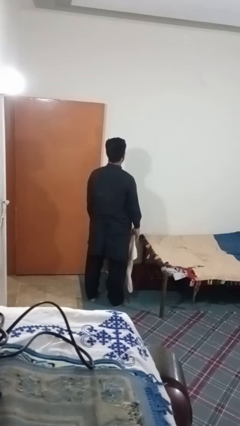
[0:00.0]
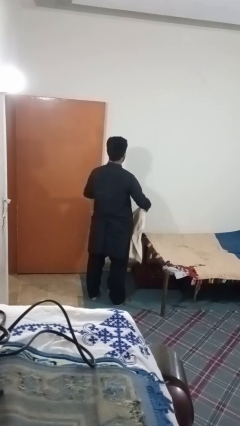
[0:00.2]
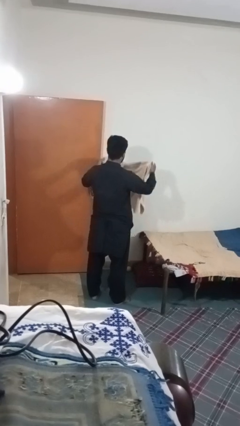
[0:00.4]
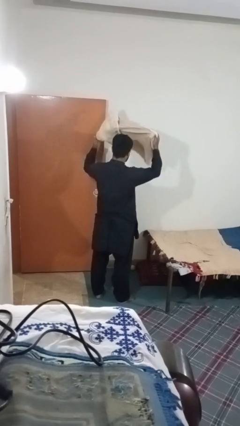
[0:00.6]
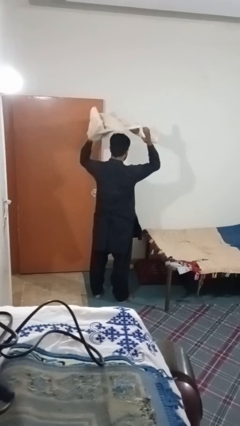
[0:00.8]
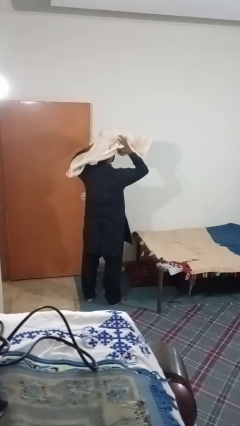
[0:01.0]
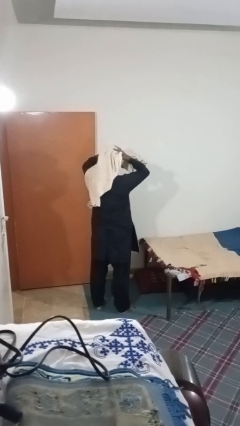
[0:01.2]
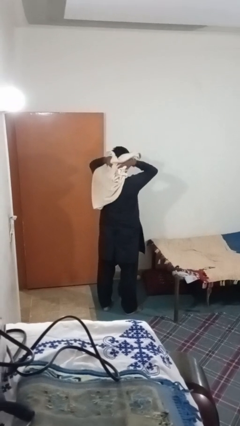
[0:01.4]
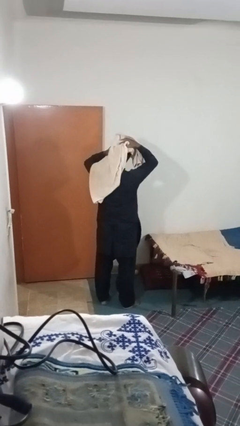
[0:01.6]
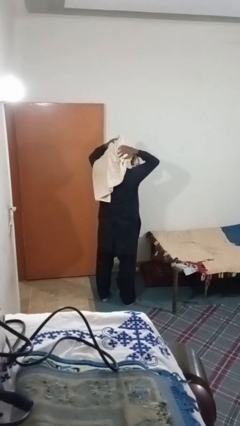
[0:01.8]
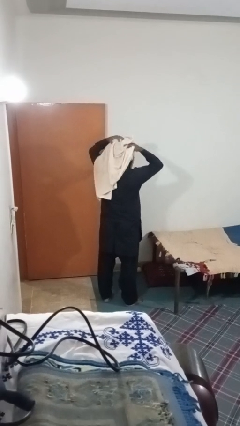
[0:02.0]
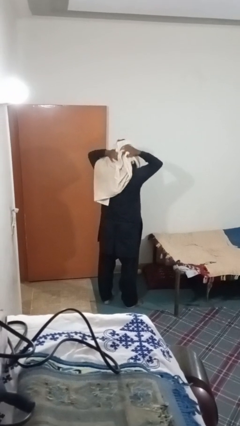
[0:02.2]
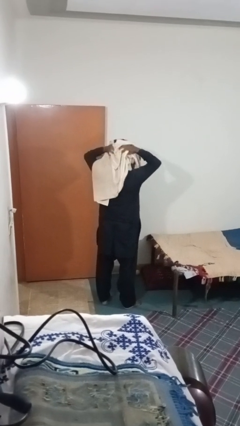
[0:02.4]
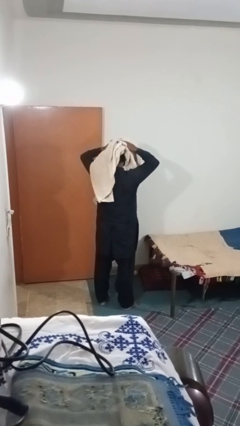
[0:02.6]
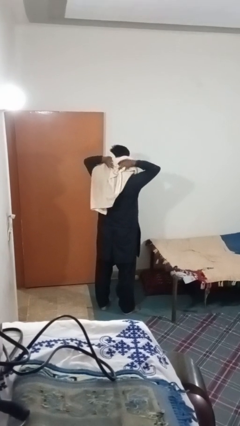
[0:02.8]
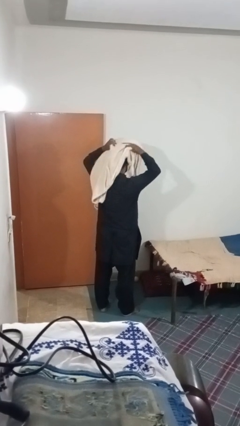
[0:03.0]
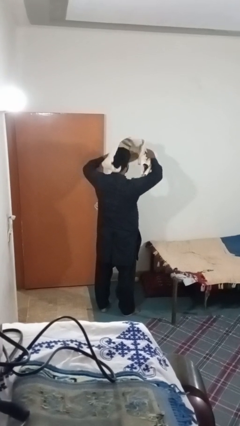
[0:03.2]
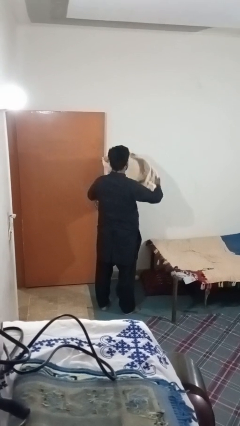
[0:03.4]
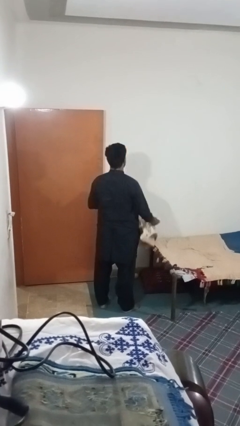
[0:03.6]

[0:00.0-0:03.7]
person dries hair with towel

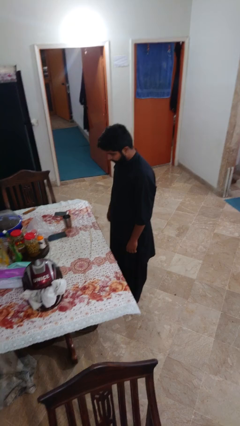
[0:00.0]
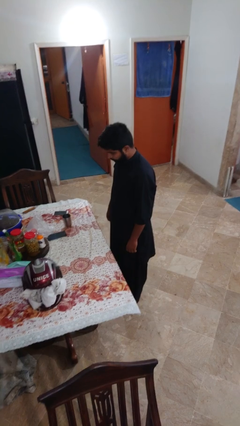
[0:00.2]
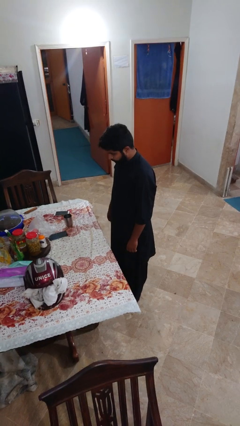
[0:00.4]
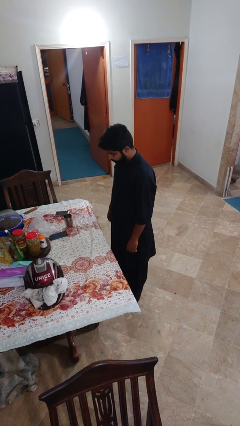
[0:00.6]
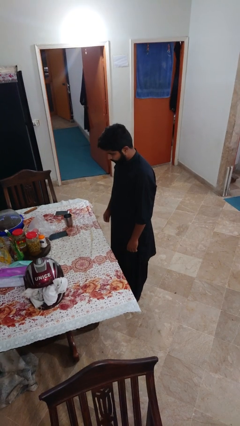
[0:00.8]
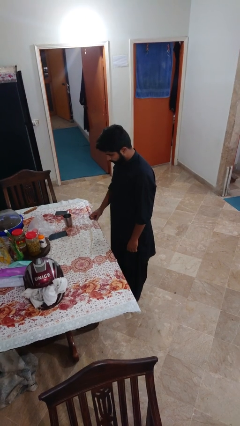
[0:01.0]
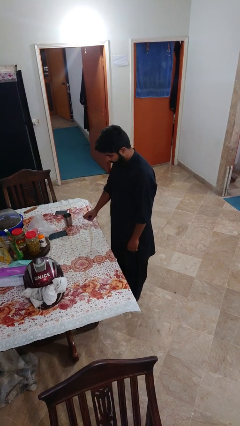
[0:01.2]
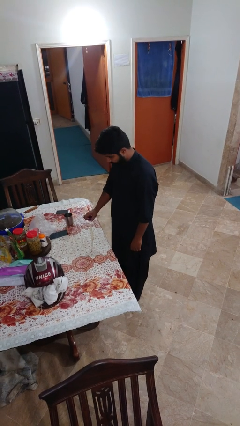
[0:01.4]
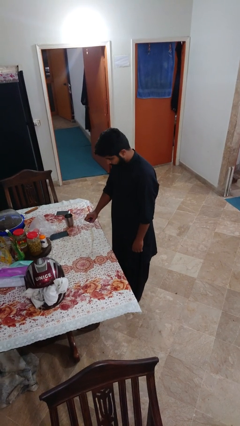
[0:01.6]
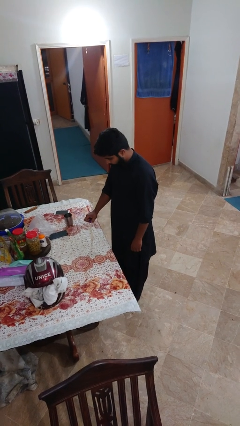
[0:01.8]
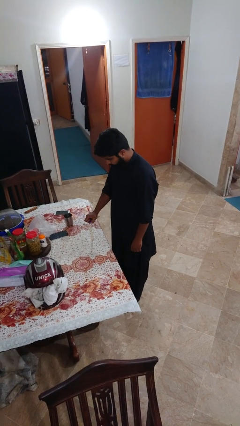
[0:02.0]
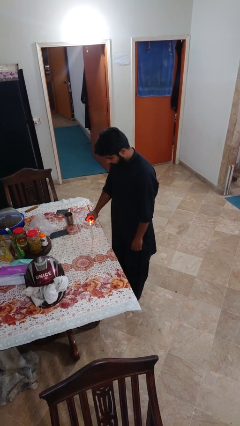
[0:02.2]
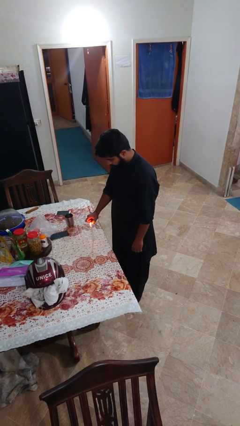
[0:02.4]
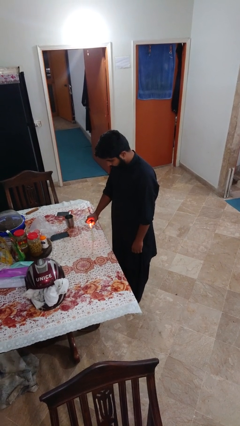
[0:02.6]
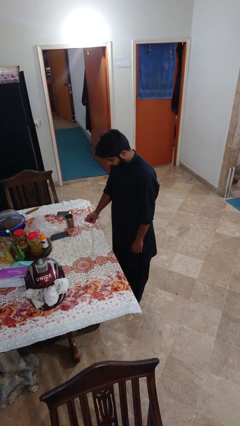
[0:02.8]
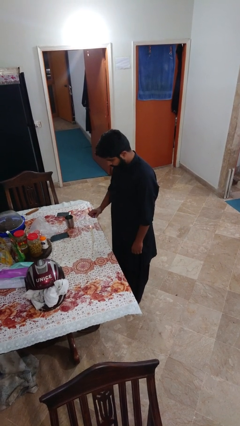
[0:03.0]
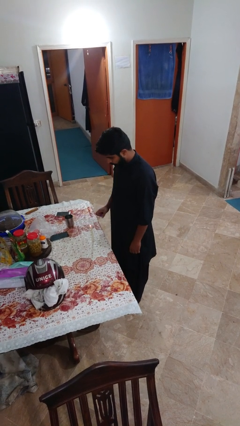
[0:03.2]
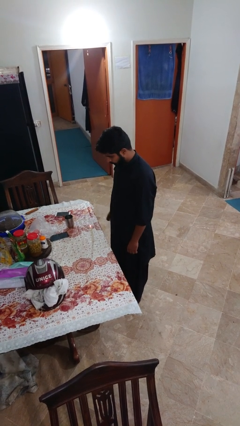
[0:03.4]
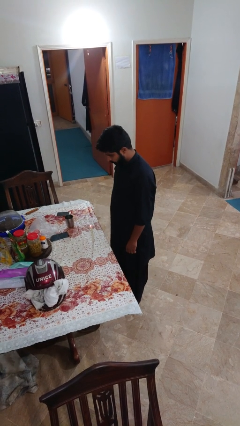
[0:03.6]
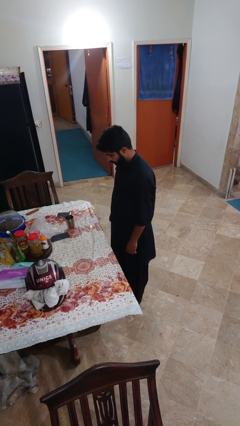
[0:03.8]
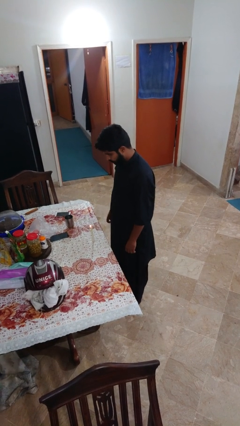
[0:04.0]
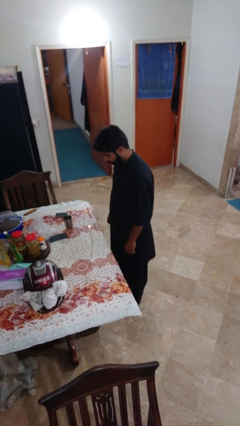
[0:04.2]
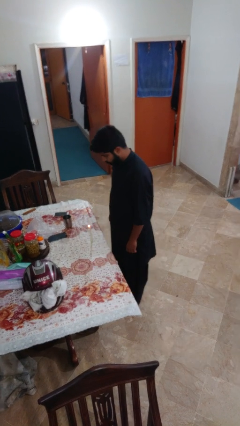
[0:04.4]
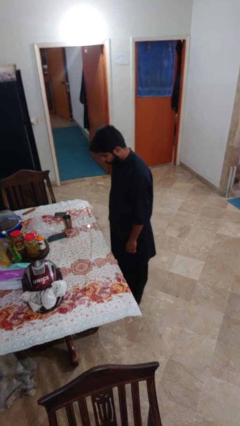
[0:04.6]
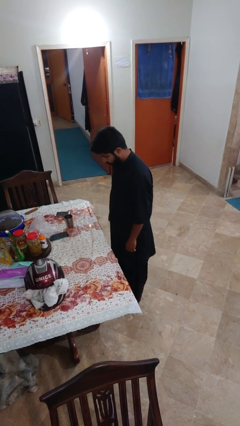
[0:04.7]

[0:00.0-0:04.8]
person lights candle

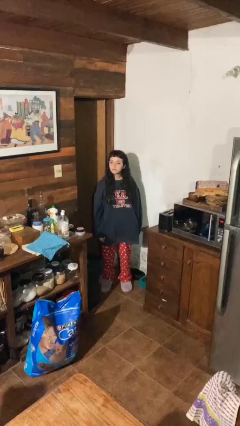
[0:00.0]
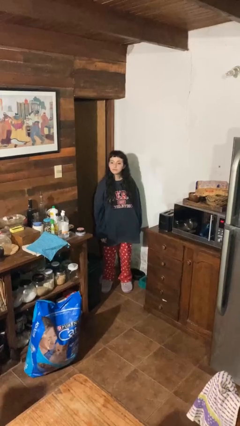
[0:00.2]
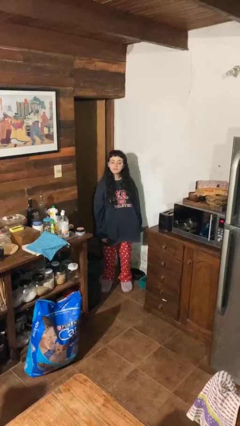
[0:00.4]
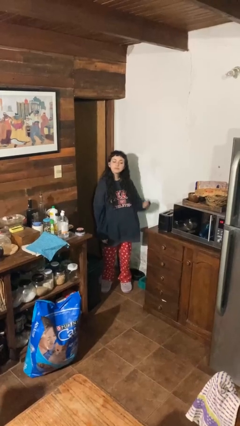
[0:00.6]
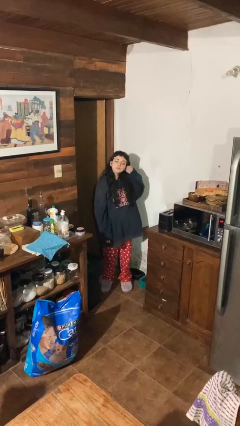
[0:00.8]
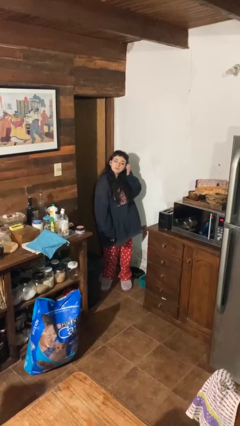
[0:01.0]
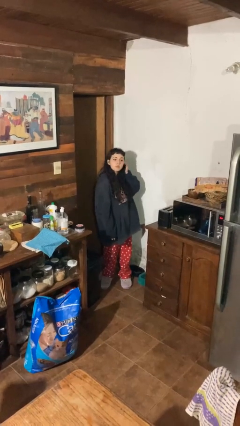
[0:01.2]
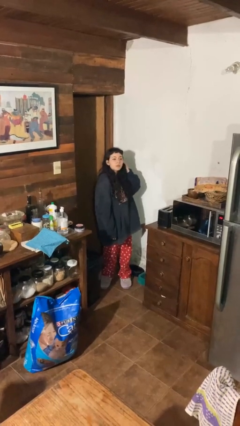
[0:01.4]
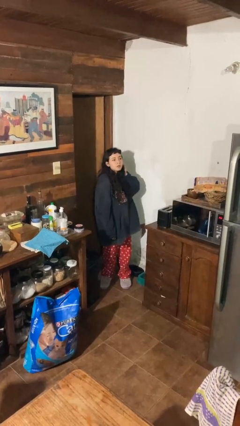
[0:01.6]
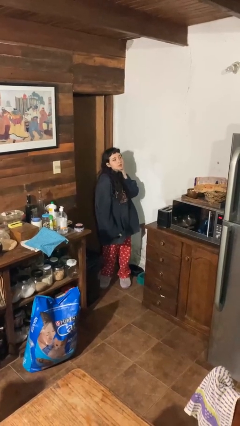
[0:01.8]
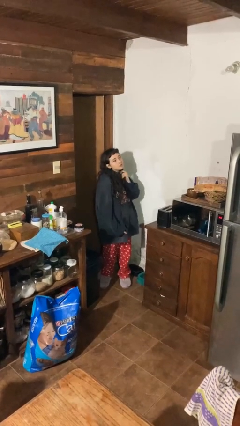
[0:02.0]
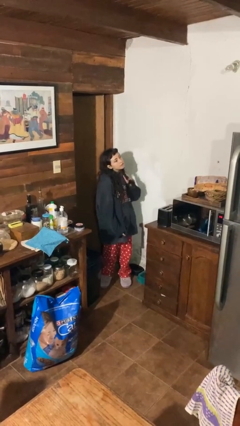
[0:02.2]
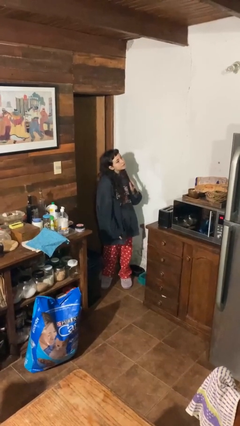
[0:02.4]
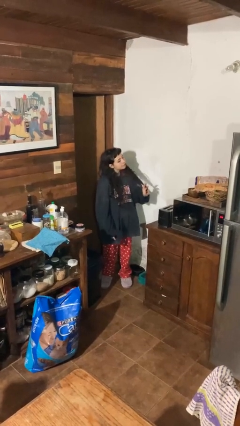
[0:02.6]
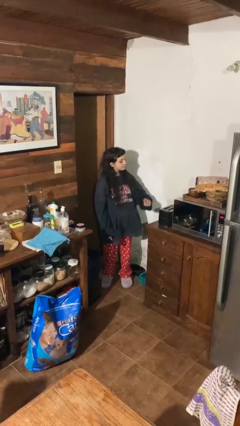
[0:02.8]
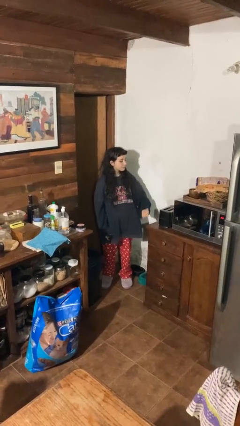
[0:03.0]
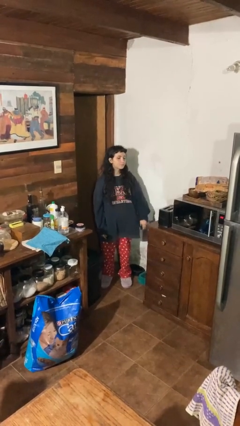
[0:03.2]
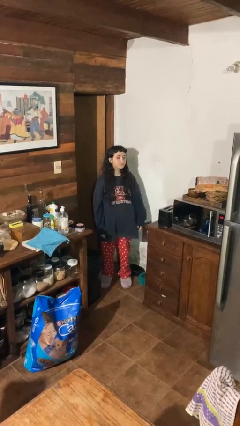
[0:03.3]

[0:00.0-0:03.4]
person strokes hair

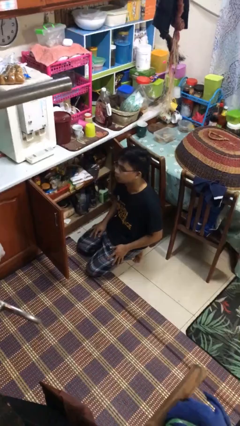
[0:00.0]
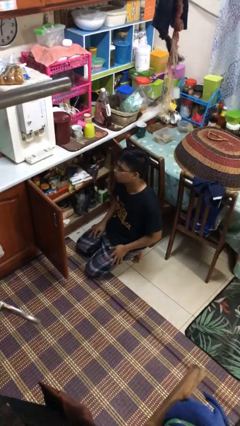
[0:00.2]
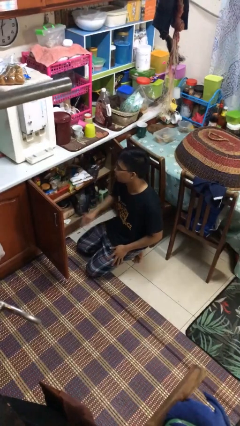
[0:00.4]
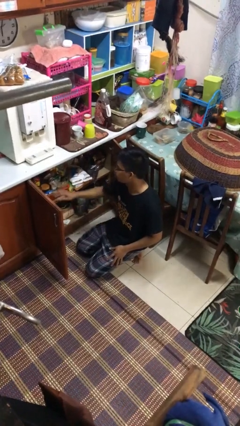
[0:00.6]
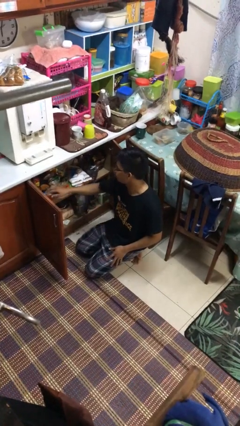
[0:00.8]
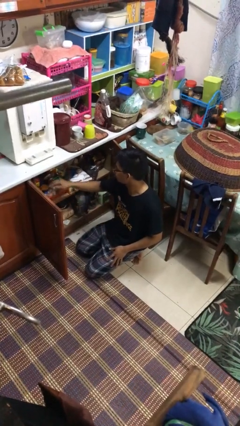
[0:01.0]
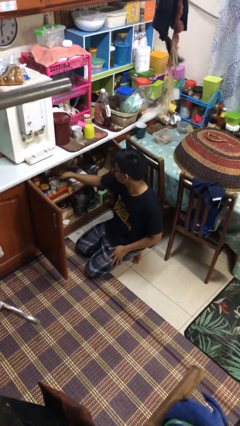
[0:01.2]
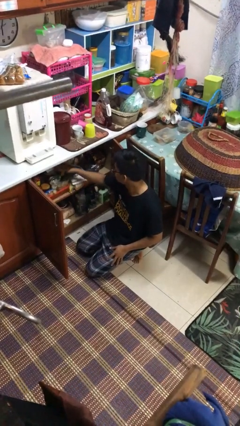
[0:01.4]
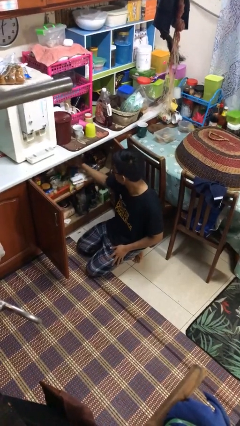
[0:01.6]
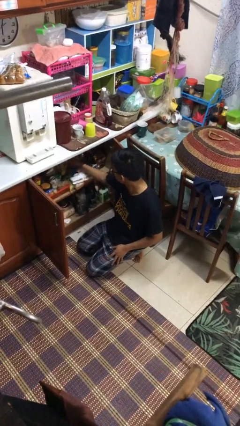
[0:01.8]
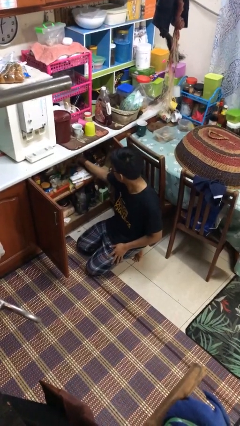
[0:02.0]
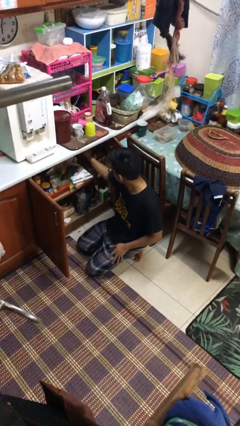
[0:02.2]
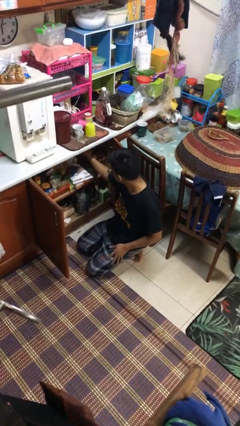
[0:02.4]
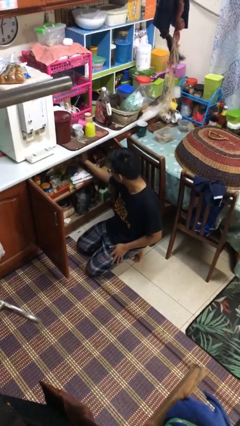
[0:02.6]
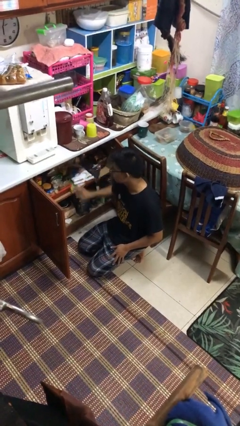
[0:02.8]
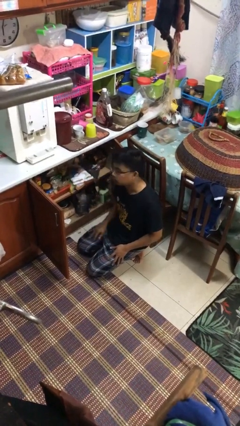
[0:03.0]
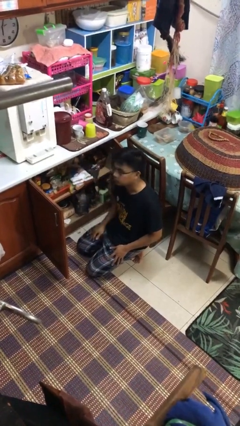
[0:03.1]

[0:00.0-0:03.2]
person searches in kitchen drawer

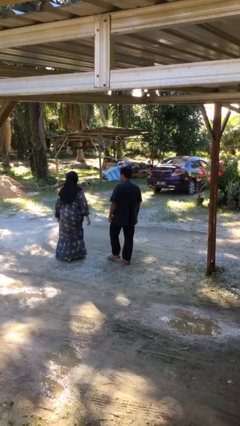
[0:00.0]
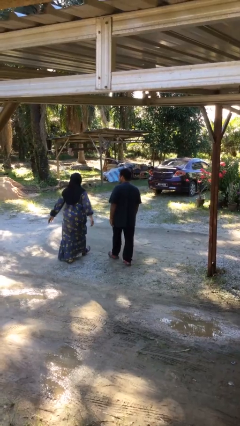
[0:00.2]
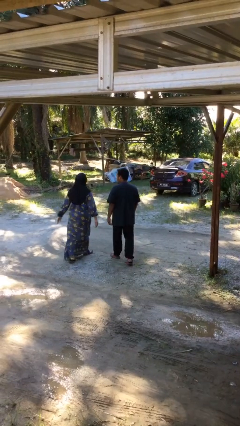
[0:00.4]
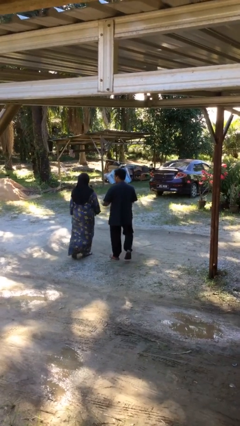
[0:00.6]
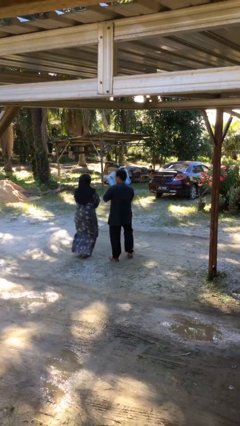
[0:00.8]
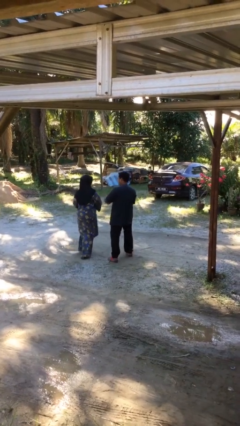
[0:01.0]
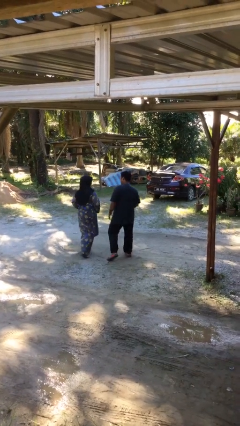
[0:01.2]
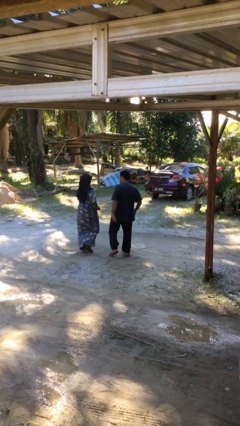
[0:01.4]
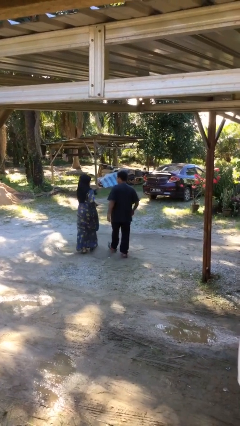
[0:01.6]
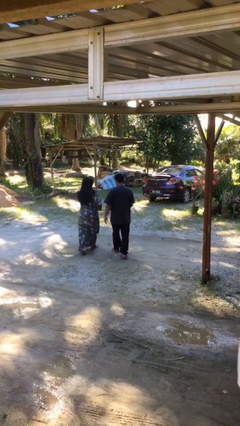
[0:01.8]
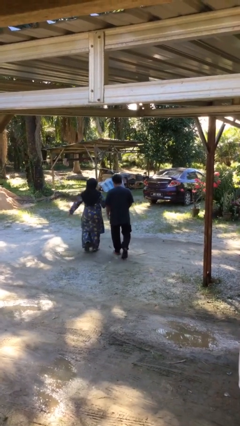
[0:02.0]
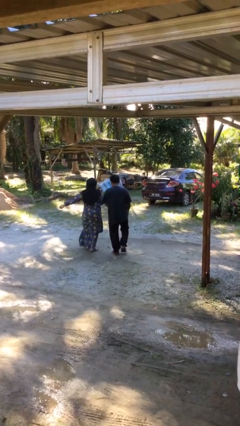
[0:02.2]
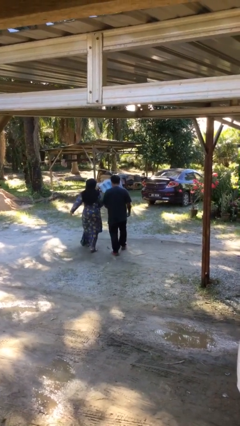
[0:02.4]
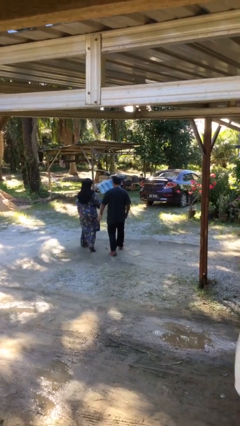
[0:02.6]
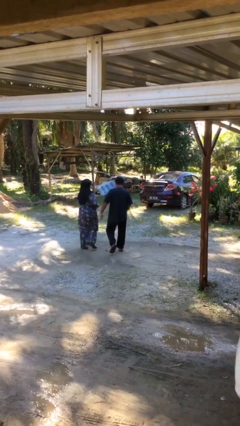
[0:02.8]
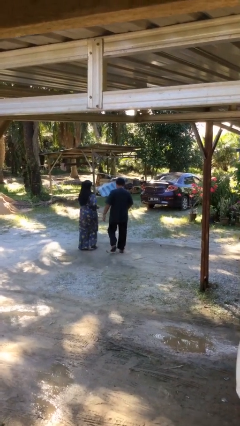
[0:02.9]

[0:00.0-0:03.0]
person talks to person
